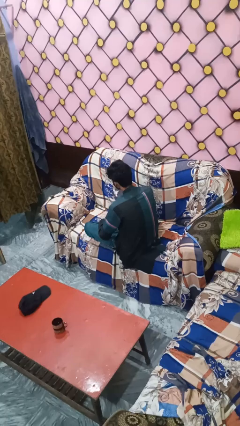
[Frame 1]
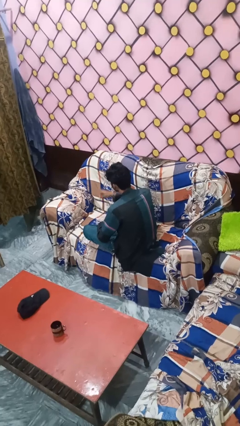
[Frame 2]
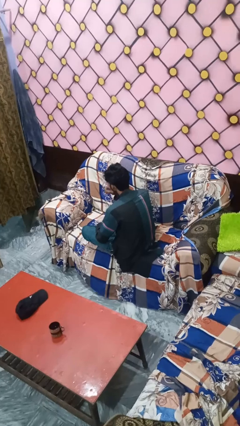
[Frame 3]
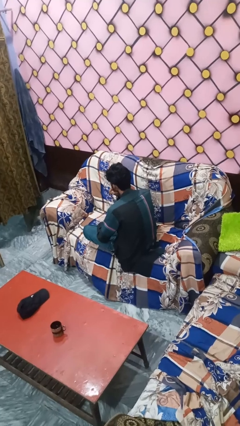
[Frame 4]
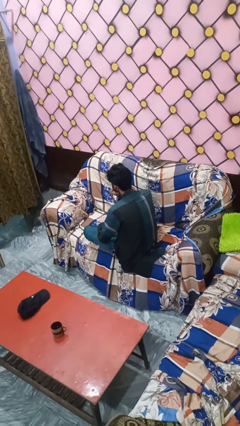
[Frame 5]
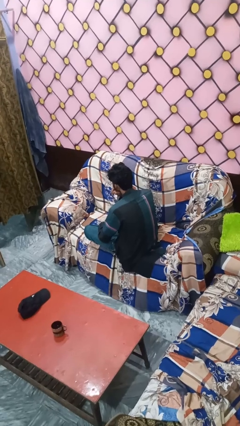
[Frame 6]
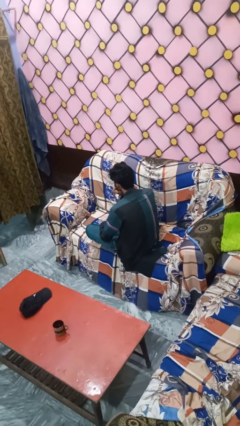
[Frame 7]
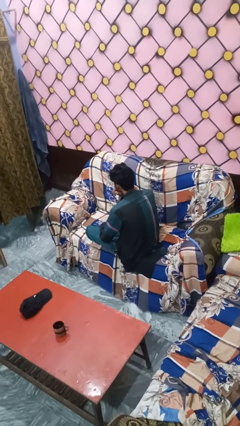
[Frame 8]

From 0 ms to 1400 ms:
person gestures be quiet

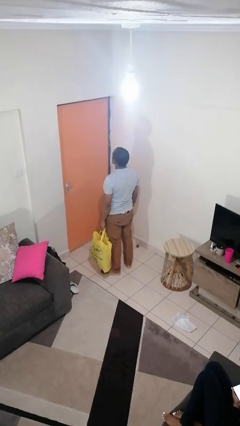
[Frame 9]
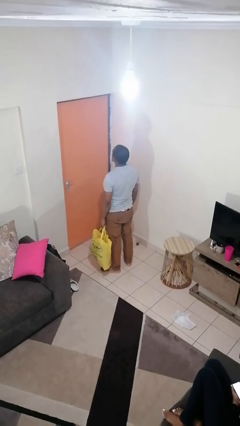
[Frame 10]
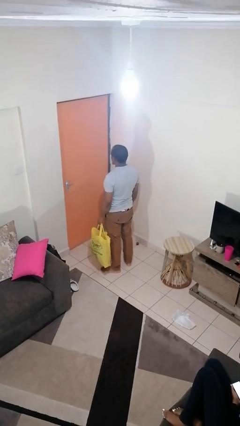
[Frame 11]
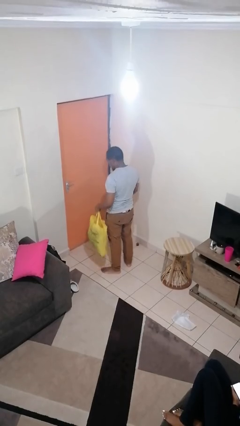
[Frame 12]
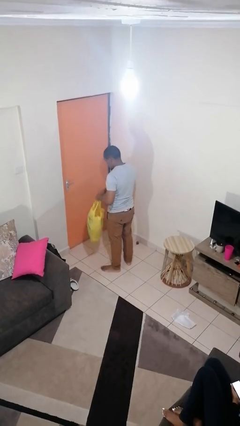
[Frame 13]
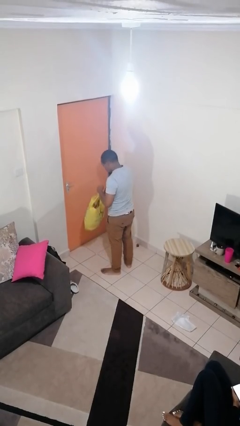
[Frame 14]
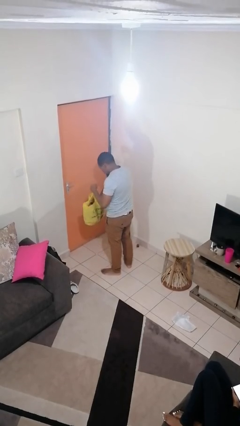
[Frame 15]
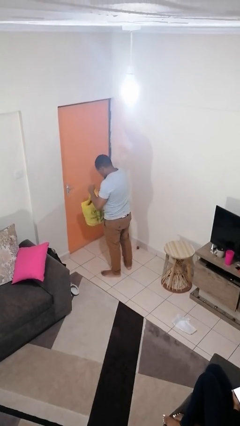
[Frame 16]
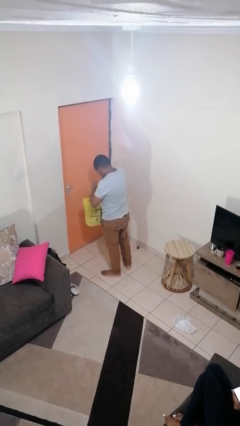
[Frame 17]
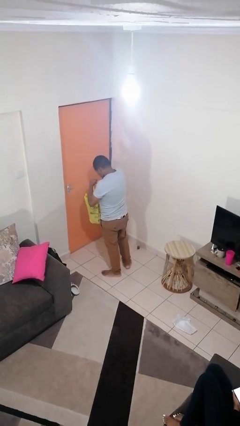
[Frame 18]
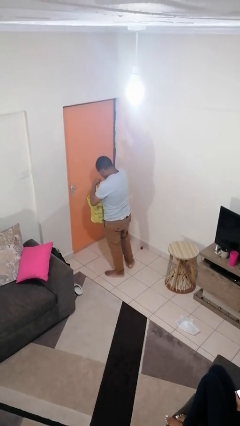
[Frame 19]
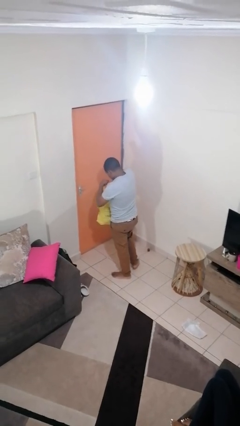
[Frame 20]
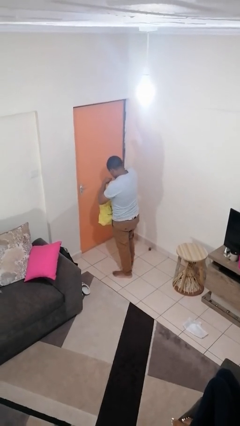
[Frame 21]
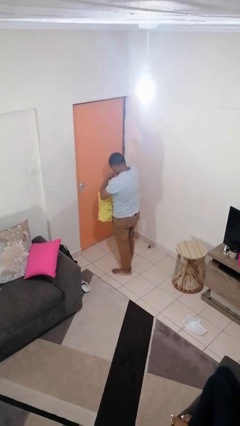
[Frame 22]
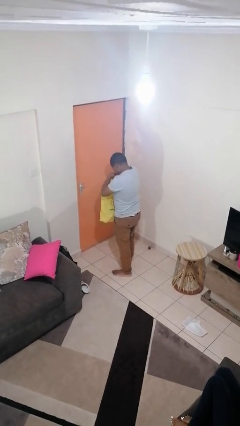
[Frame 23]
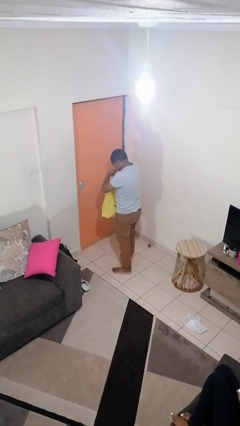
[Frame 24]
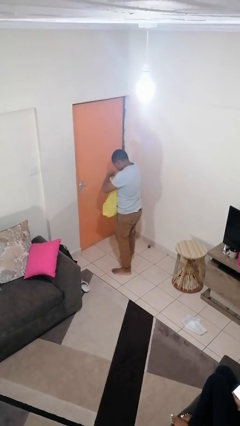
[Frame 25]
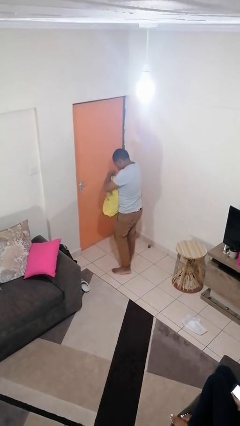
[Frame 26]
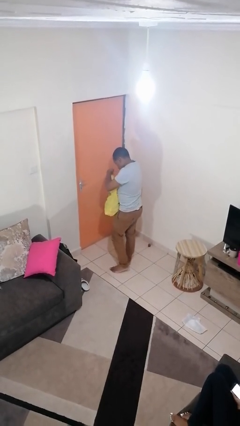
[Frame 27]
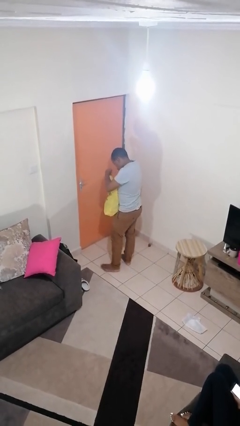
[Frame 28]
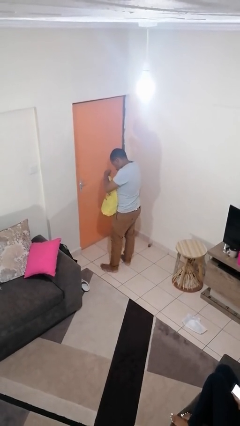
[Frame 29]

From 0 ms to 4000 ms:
person searches in bag

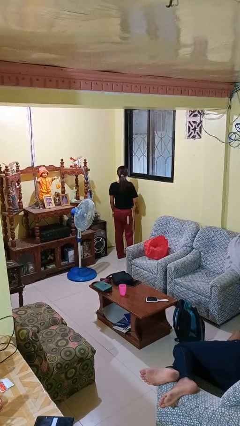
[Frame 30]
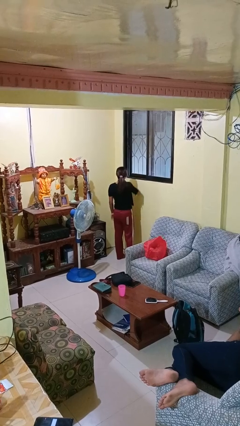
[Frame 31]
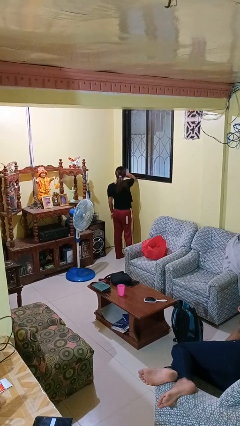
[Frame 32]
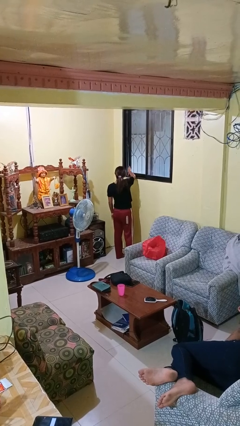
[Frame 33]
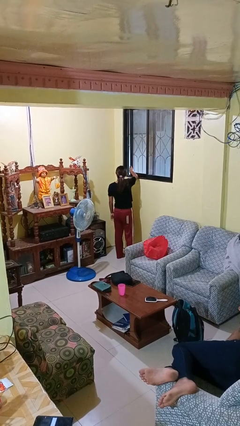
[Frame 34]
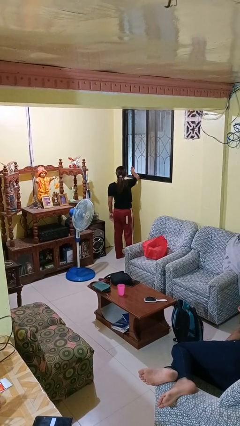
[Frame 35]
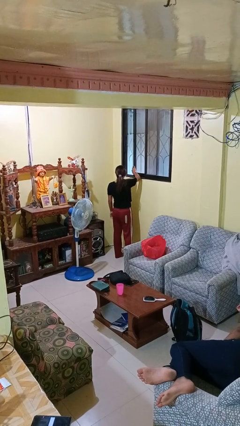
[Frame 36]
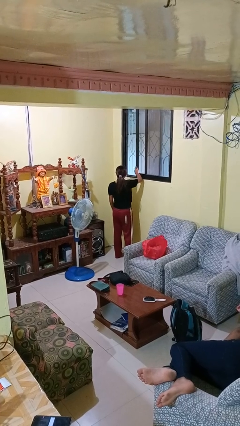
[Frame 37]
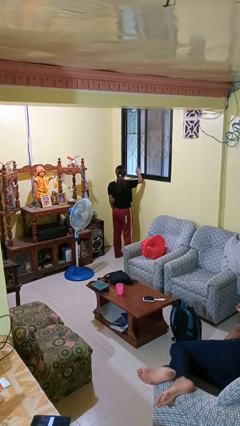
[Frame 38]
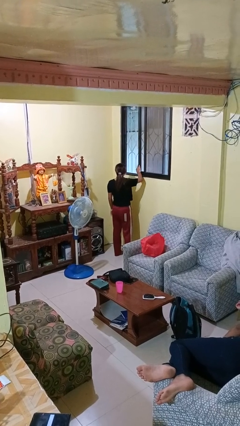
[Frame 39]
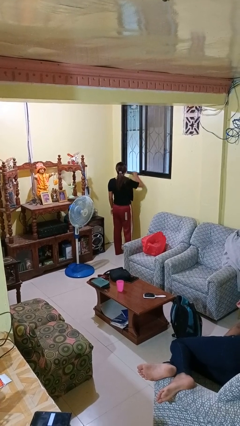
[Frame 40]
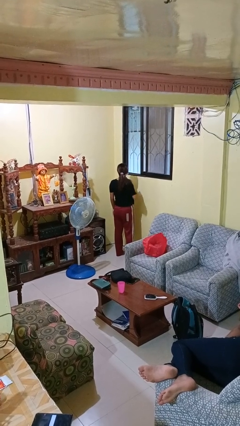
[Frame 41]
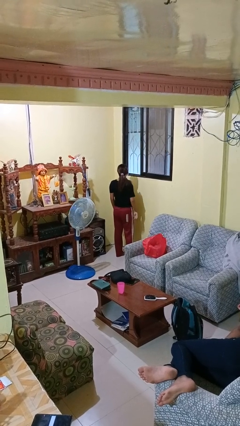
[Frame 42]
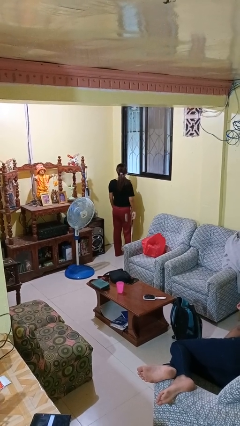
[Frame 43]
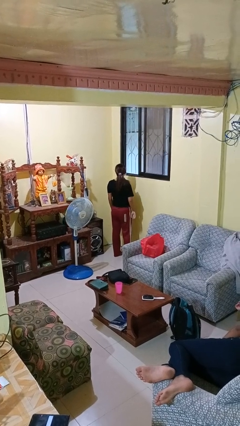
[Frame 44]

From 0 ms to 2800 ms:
person opens home window

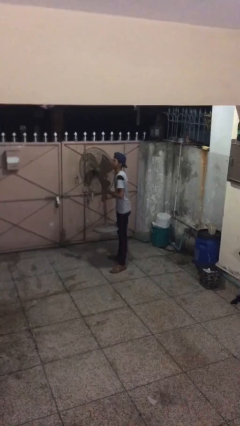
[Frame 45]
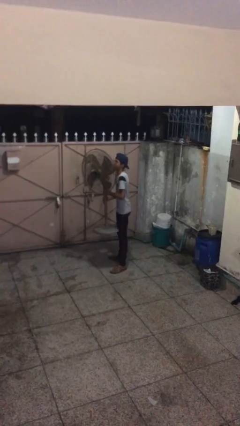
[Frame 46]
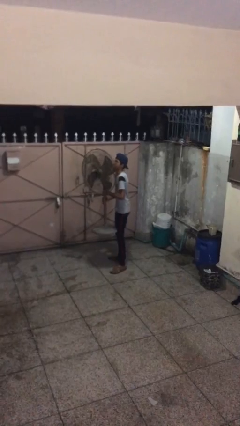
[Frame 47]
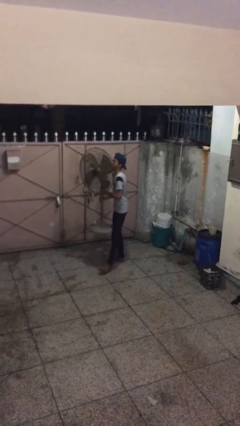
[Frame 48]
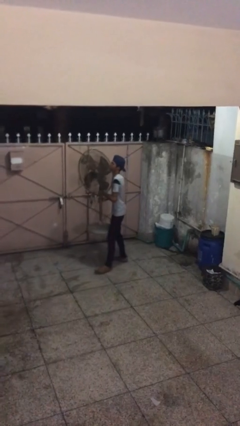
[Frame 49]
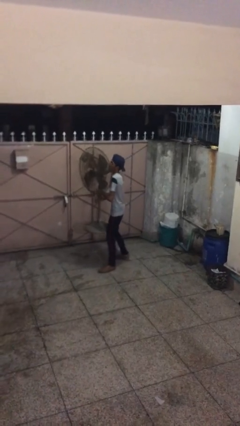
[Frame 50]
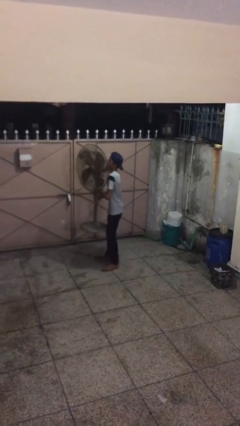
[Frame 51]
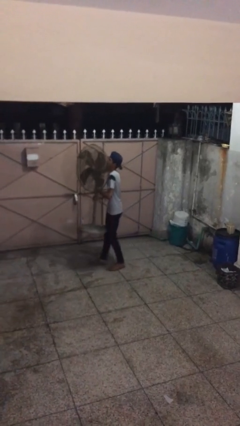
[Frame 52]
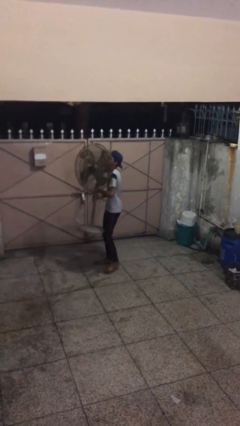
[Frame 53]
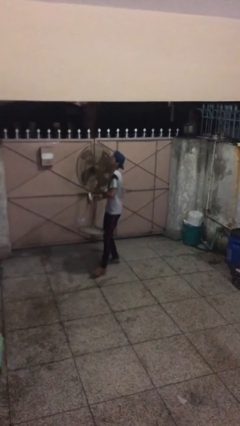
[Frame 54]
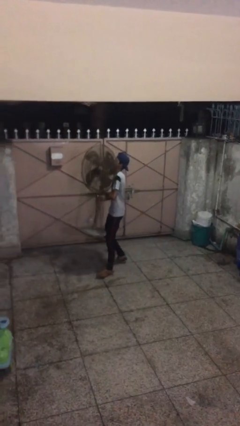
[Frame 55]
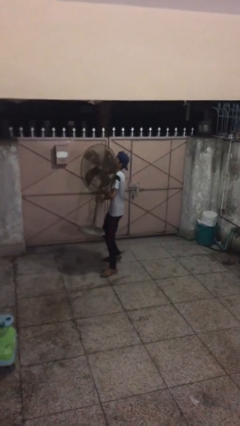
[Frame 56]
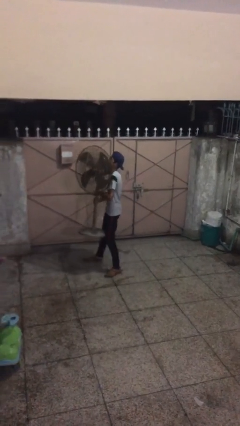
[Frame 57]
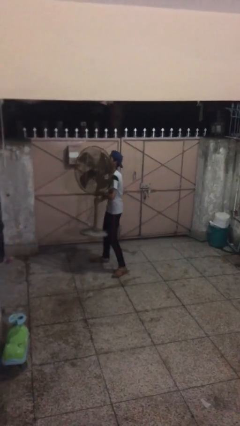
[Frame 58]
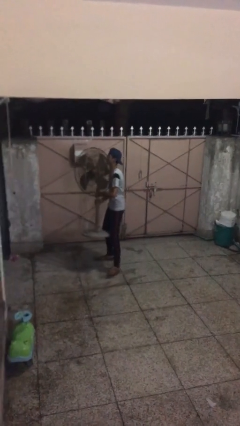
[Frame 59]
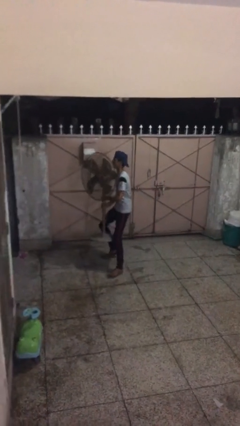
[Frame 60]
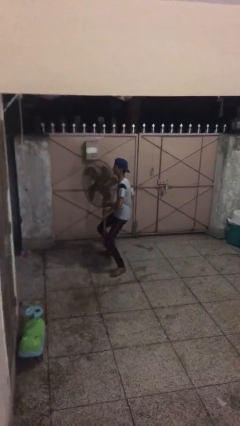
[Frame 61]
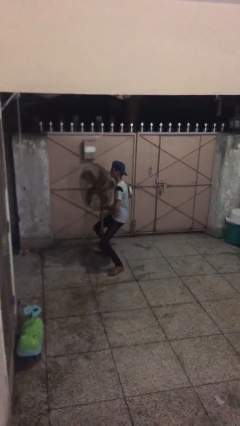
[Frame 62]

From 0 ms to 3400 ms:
person carries heavy object

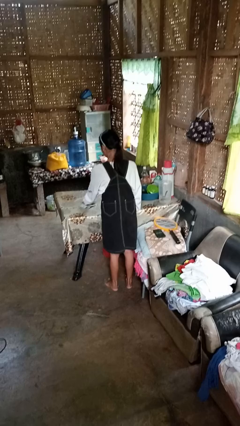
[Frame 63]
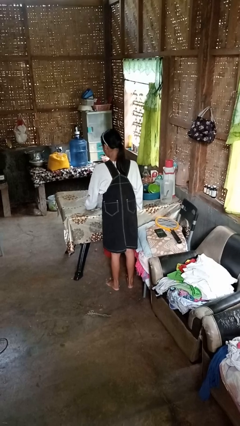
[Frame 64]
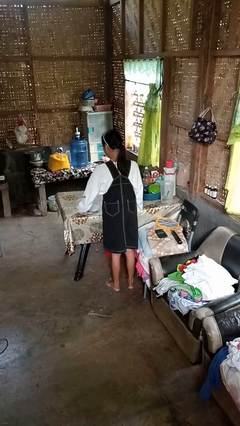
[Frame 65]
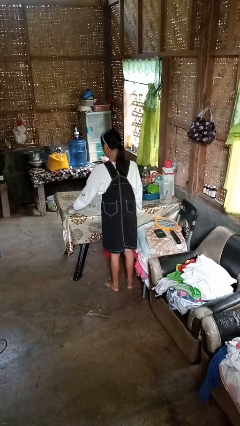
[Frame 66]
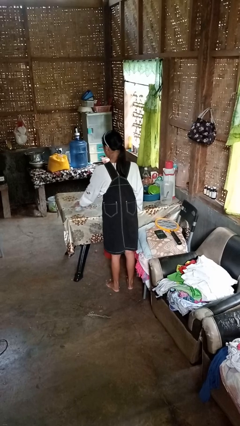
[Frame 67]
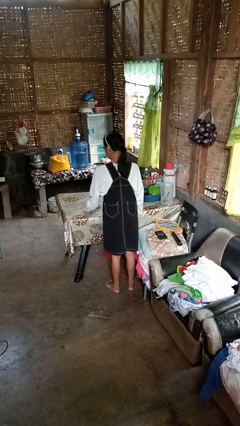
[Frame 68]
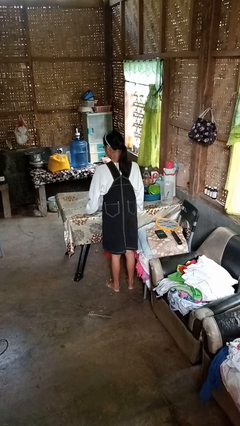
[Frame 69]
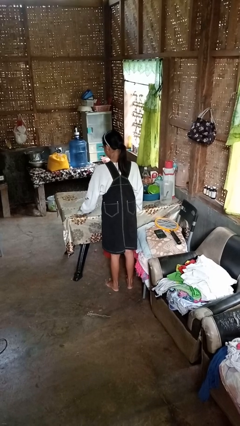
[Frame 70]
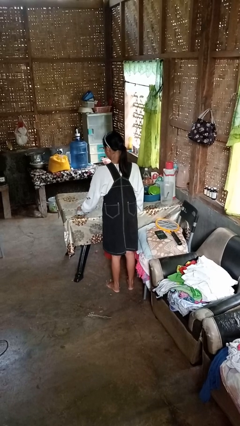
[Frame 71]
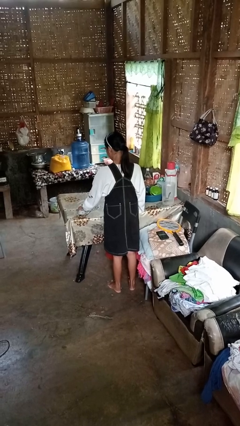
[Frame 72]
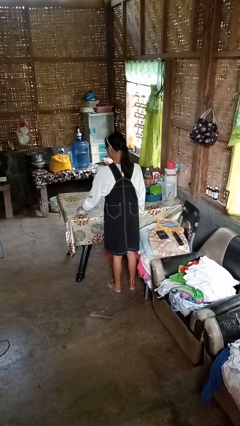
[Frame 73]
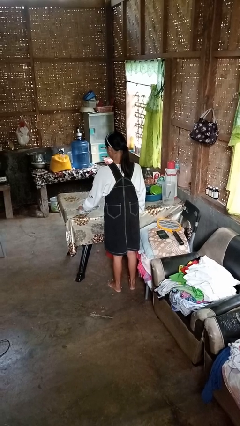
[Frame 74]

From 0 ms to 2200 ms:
person cleans table with rag

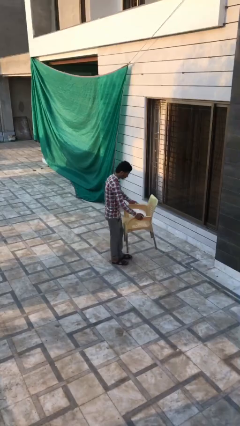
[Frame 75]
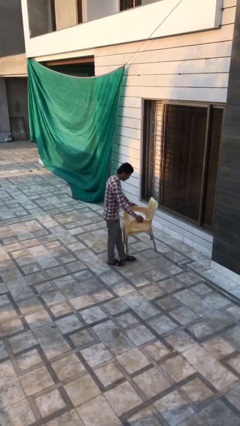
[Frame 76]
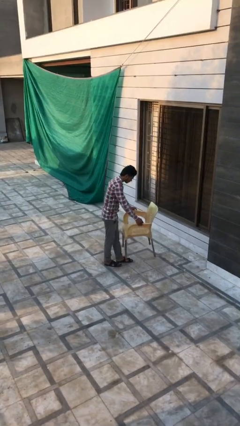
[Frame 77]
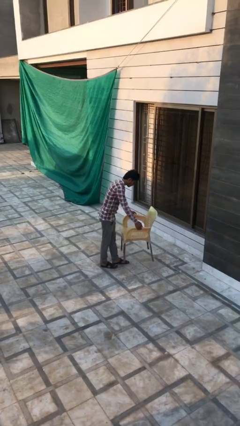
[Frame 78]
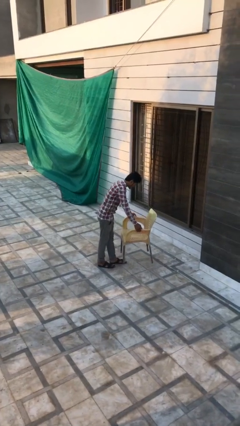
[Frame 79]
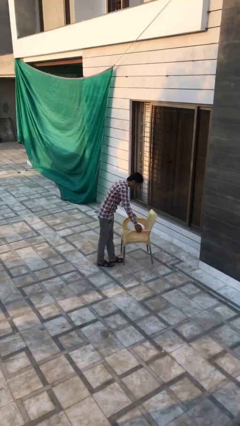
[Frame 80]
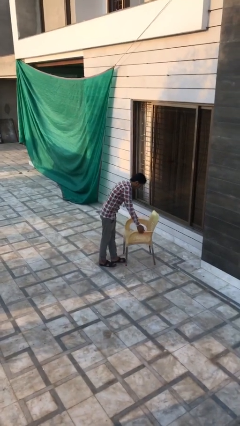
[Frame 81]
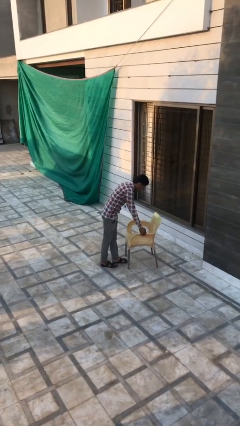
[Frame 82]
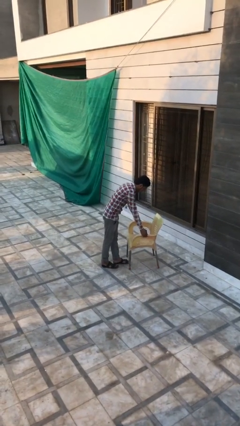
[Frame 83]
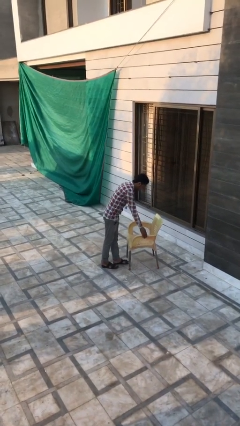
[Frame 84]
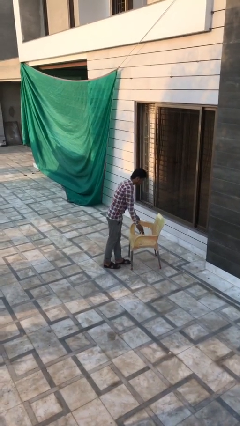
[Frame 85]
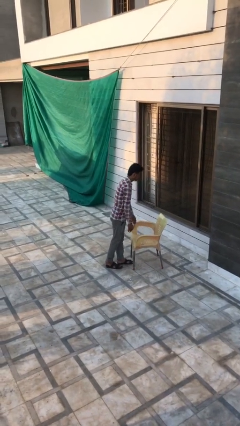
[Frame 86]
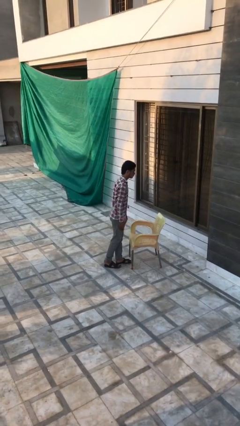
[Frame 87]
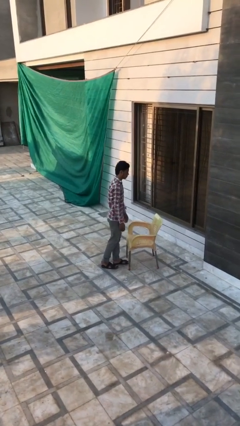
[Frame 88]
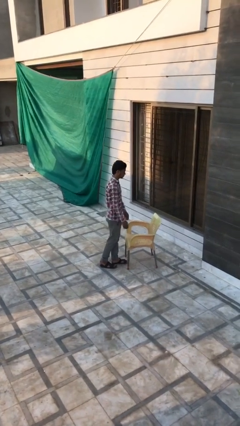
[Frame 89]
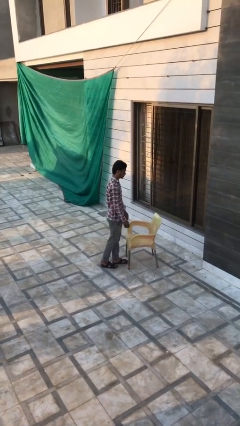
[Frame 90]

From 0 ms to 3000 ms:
person puts down object on floor

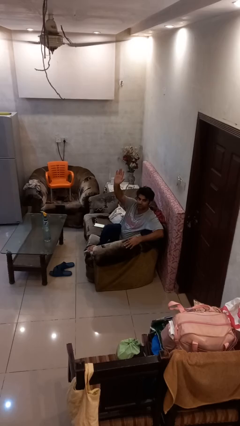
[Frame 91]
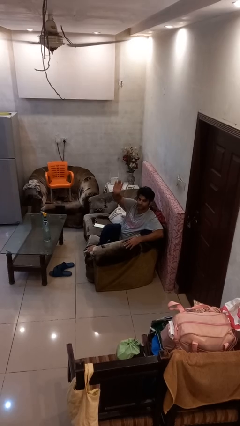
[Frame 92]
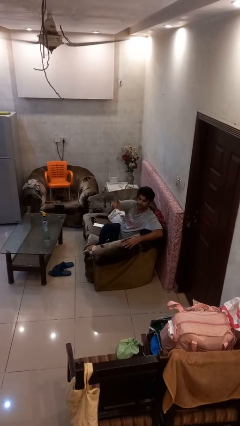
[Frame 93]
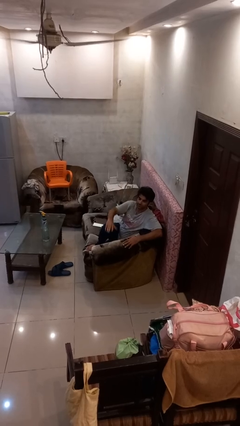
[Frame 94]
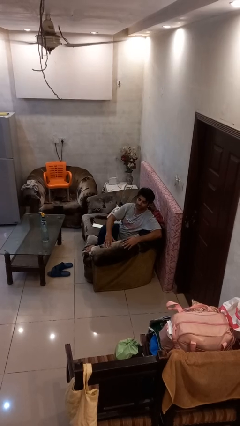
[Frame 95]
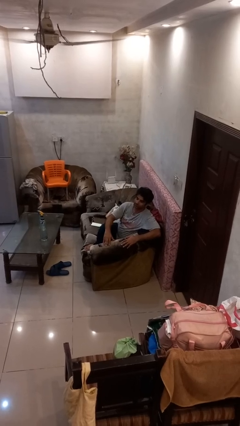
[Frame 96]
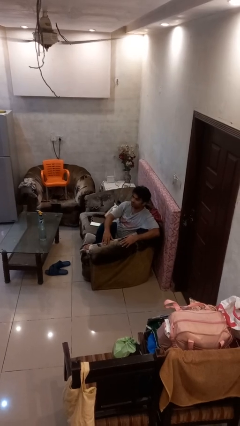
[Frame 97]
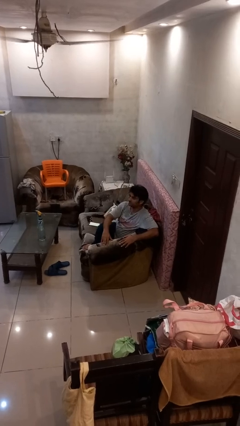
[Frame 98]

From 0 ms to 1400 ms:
person gestures lower hand
